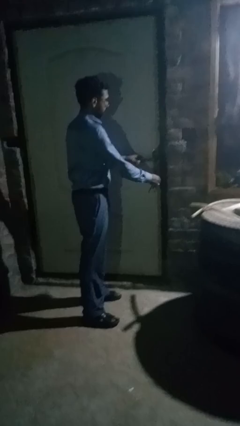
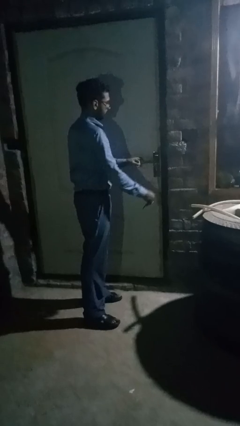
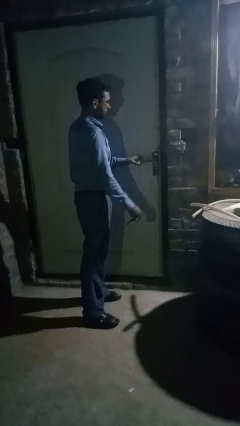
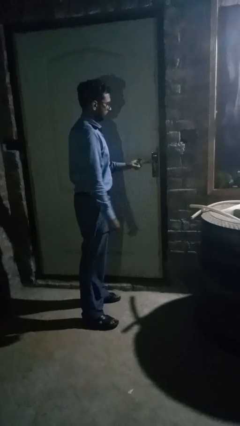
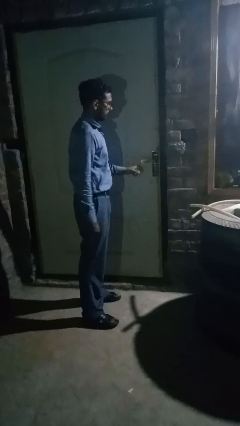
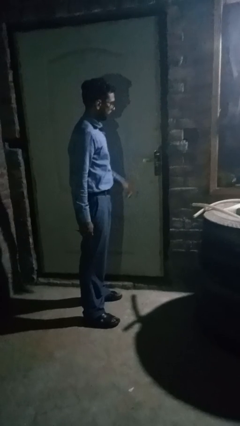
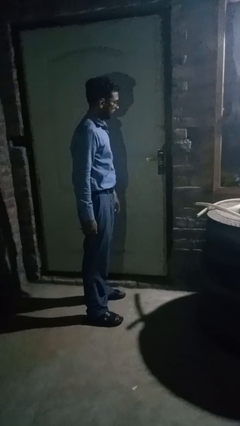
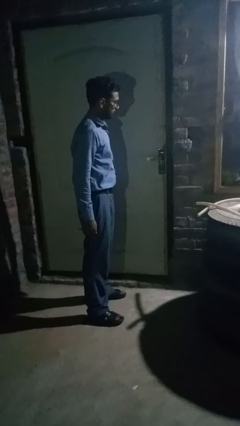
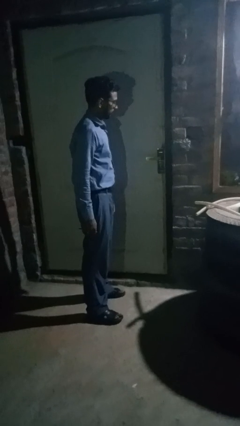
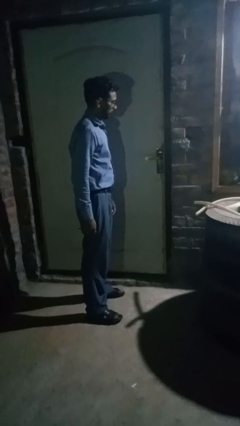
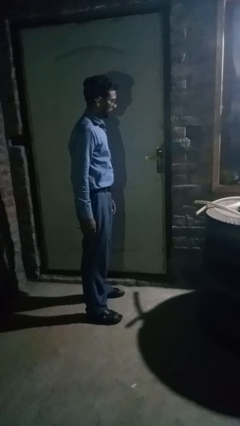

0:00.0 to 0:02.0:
person locks door with keys

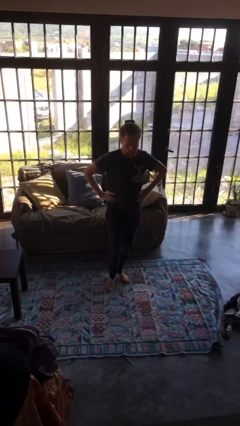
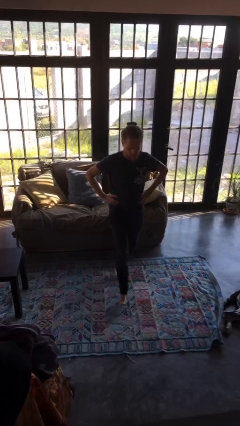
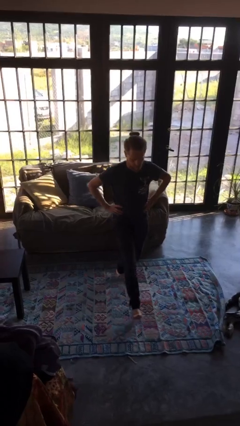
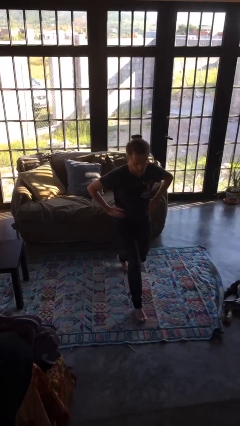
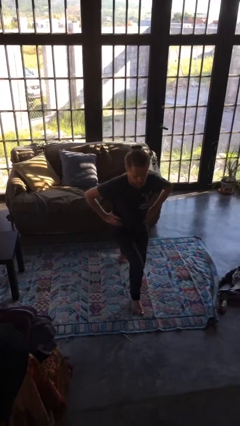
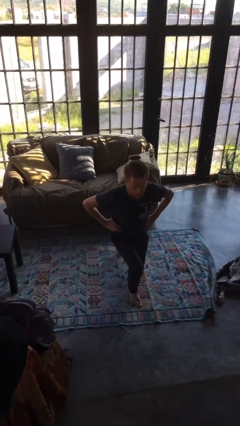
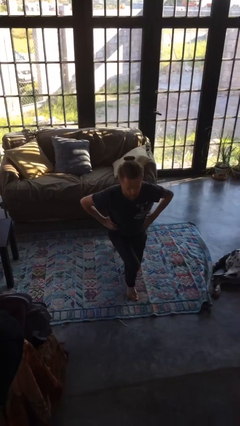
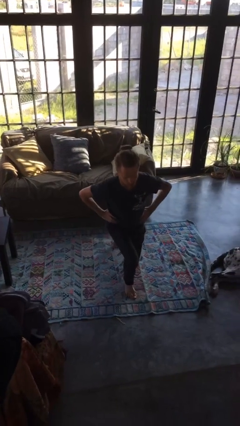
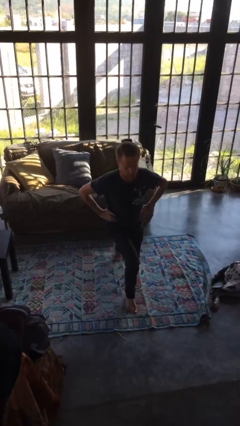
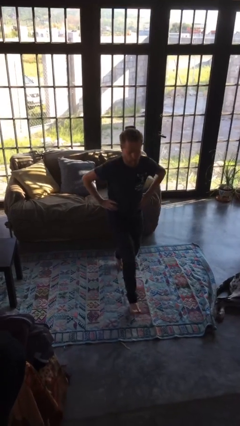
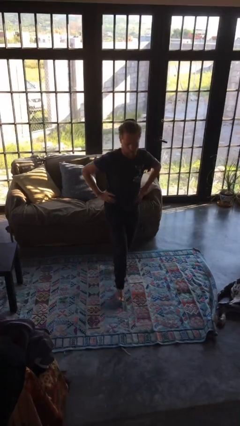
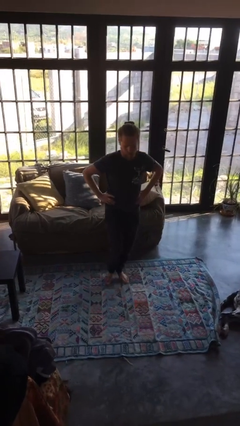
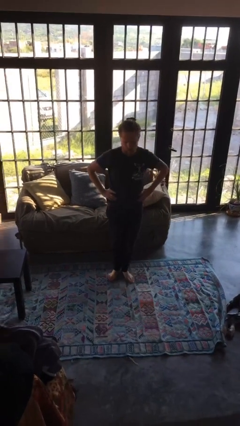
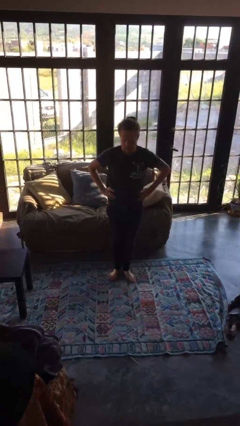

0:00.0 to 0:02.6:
person exercises with lunges

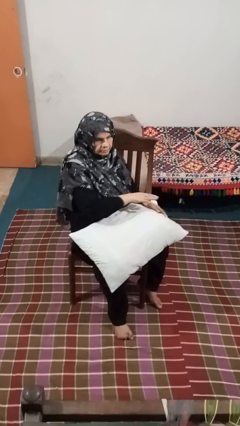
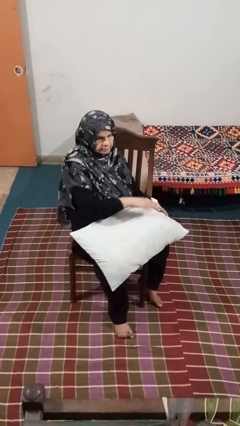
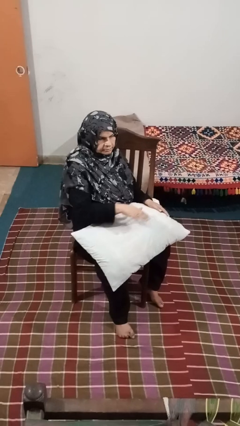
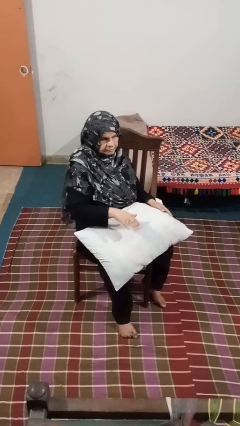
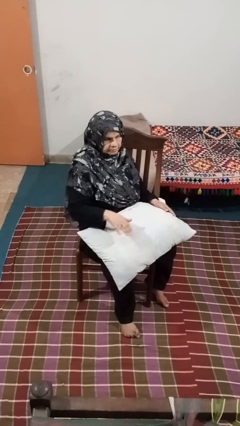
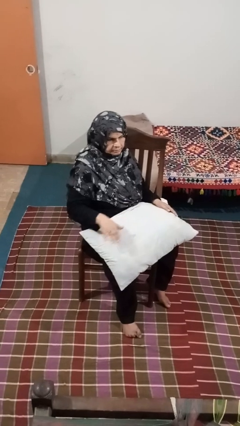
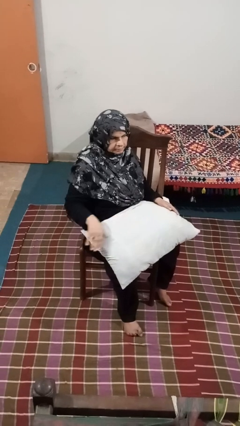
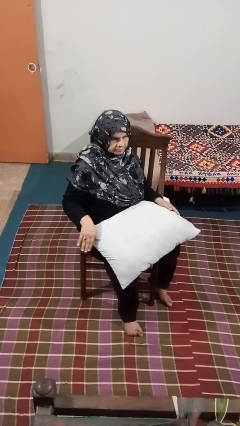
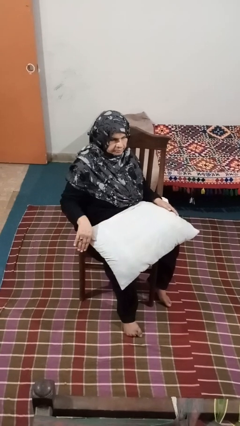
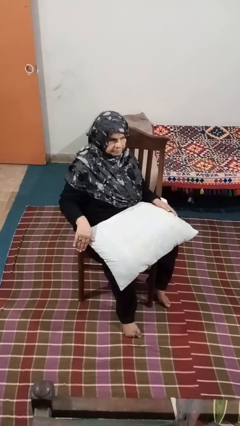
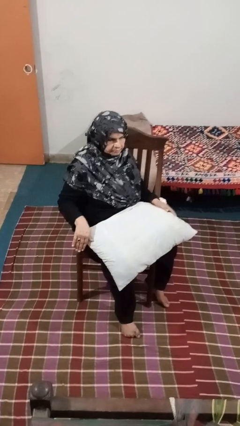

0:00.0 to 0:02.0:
person waves hand over object

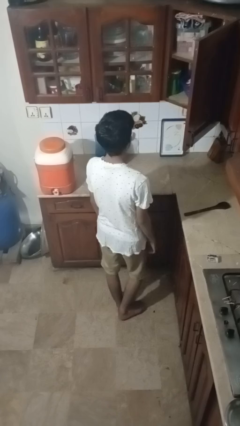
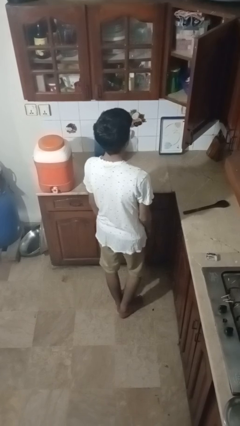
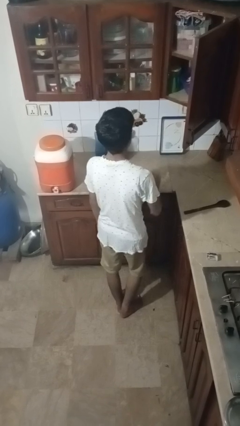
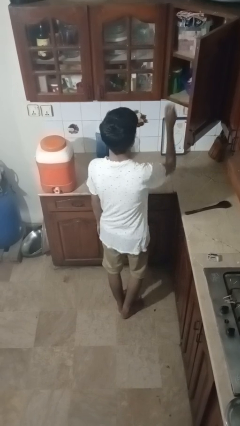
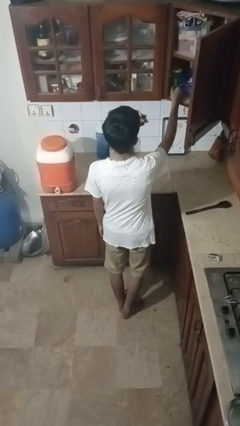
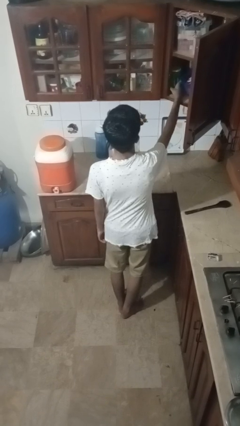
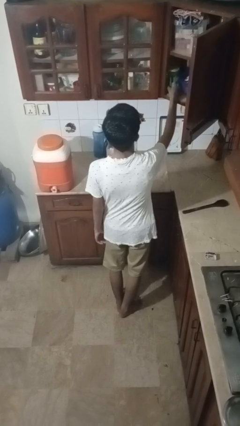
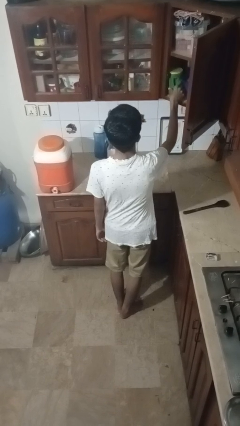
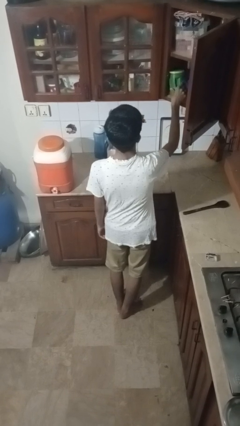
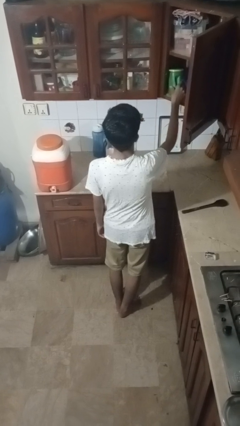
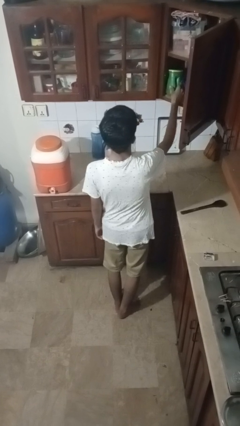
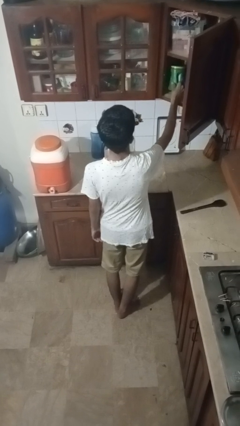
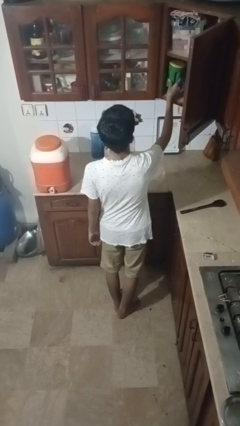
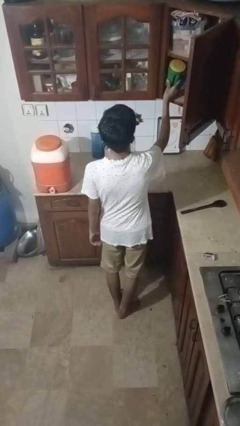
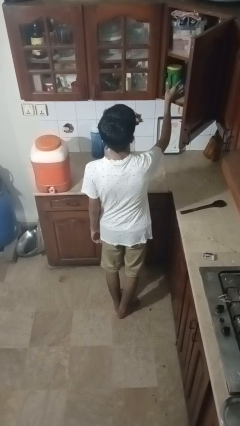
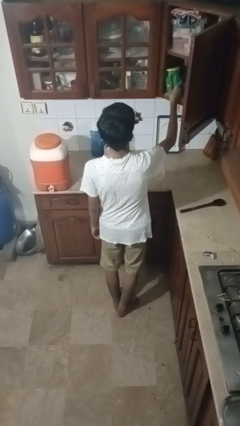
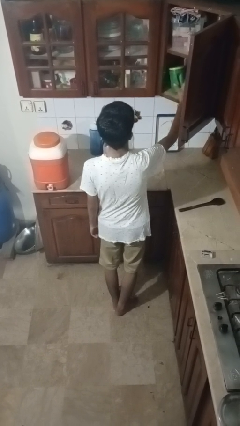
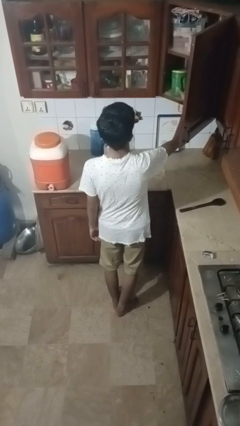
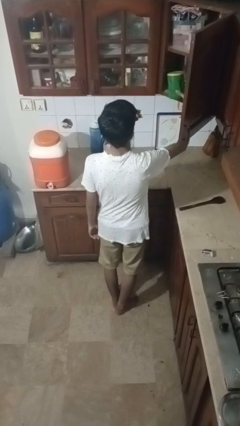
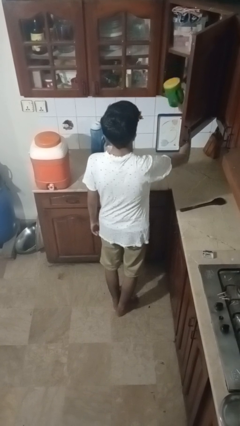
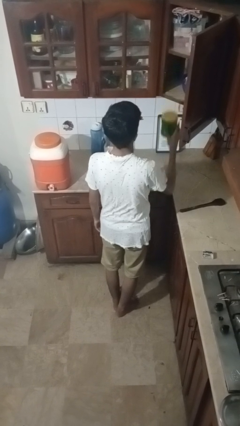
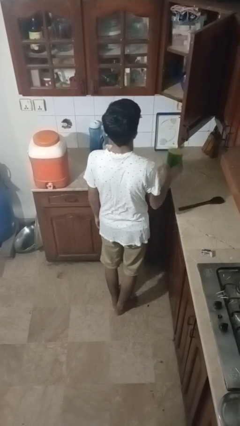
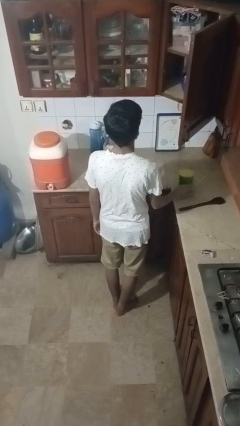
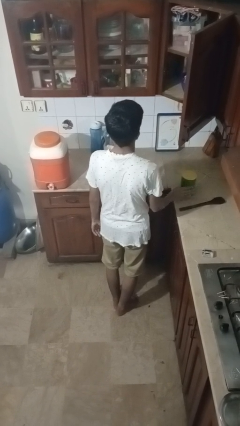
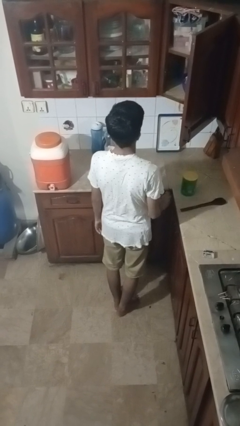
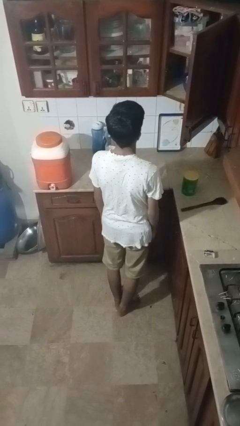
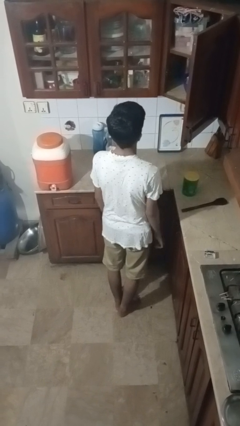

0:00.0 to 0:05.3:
person takes object from cabinet

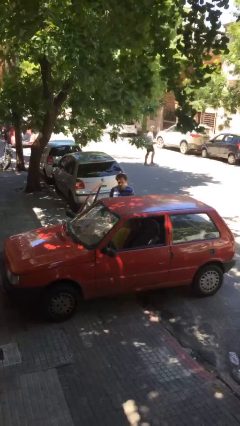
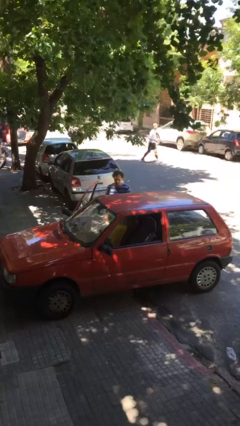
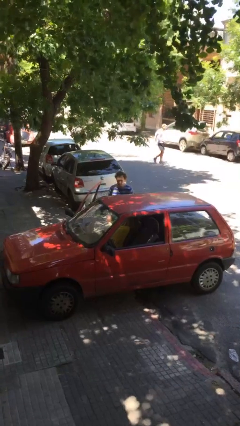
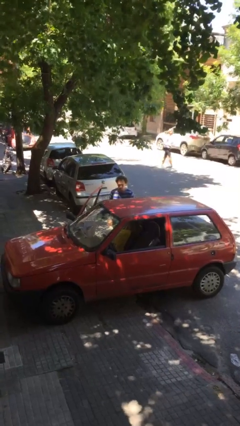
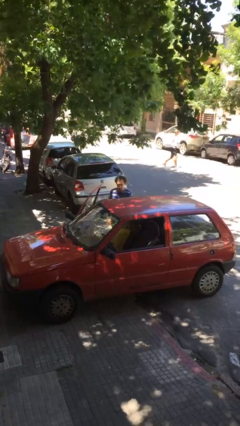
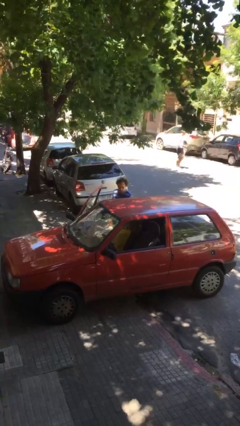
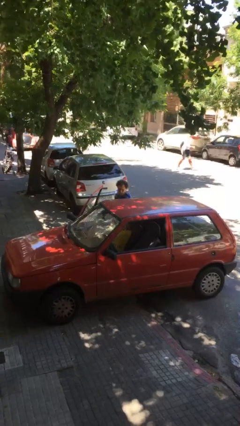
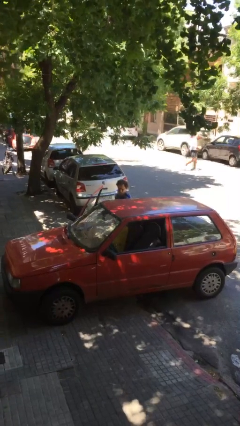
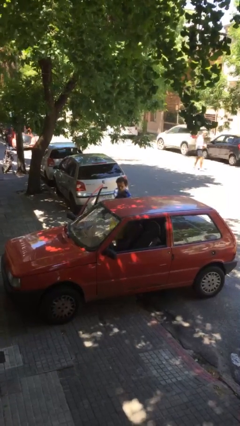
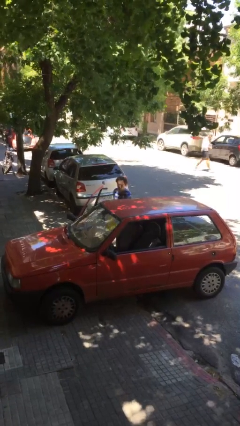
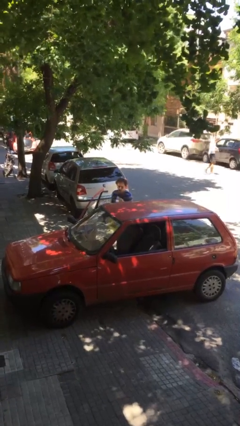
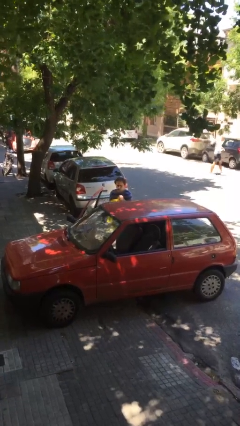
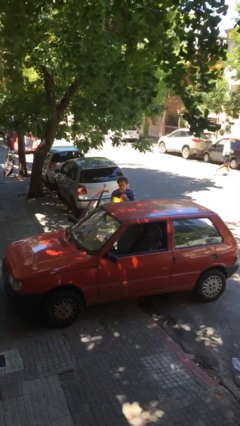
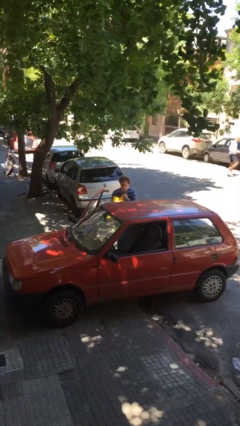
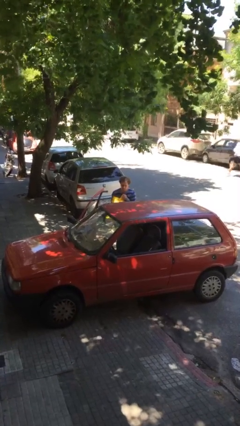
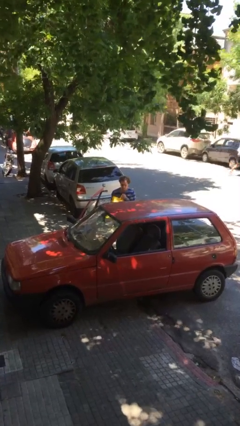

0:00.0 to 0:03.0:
person unloads car

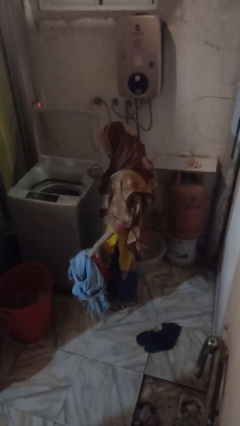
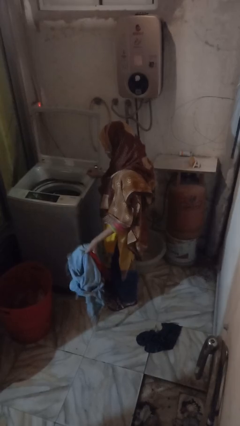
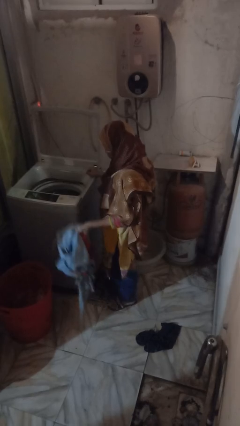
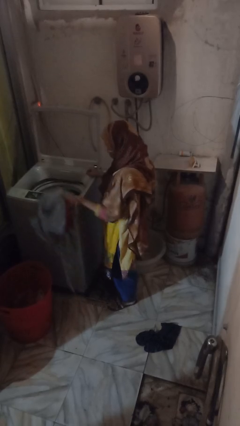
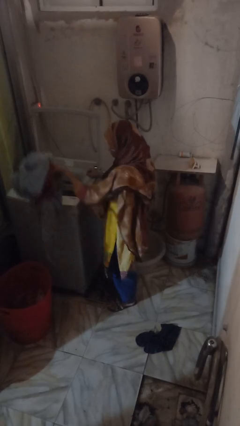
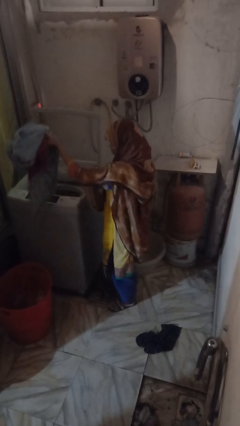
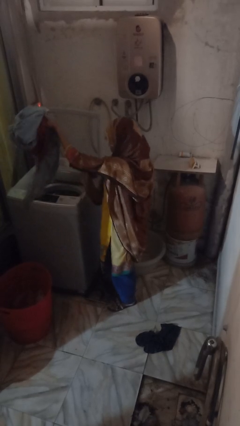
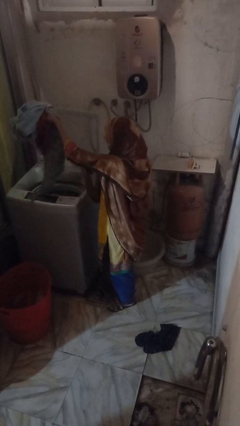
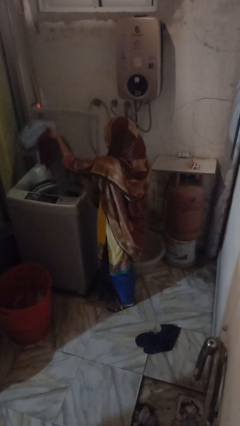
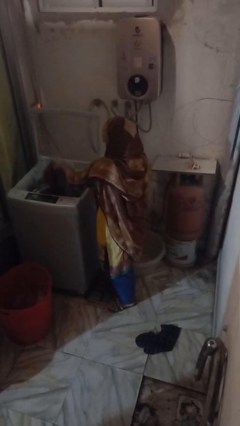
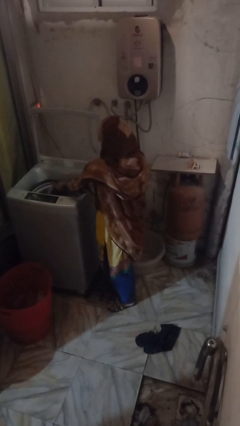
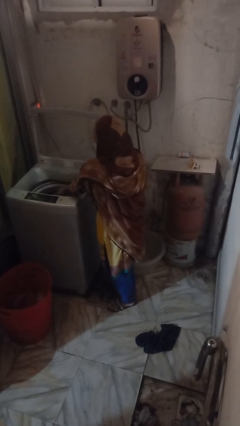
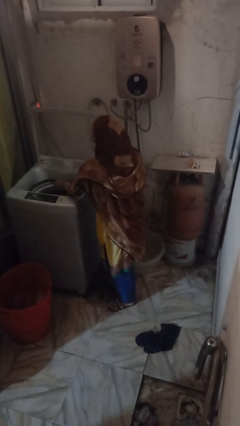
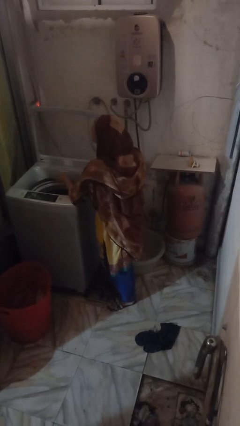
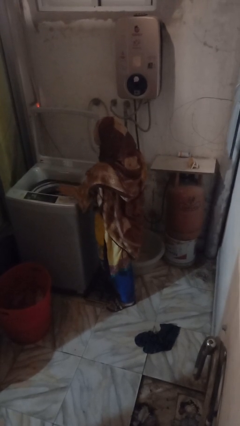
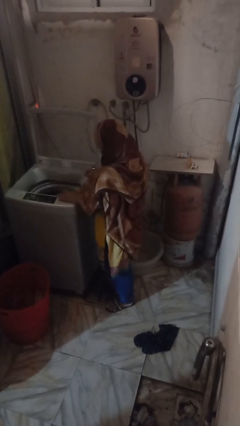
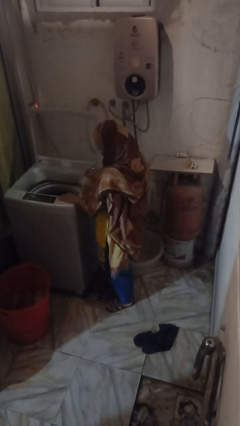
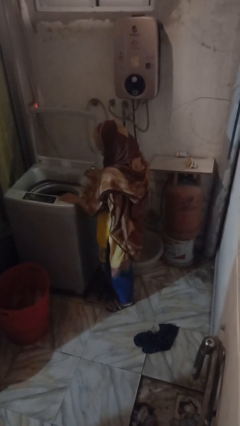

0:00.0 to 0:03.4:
person loads clotheswasher
